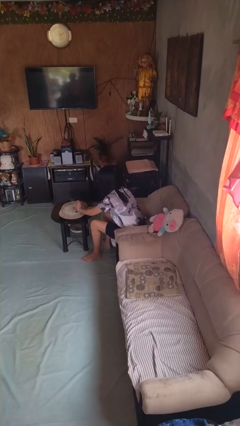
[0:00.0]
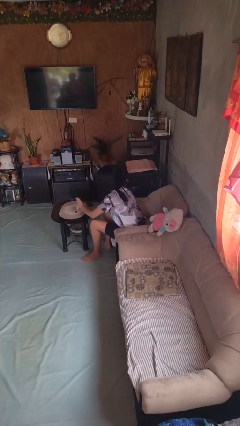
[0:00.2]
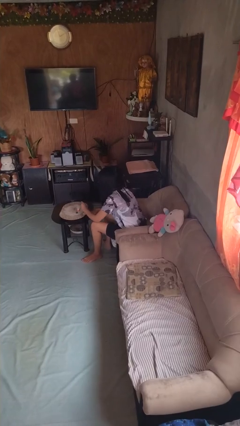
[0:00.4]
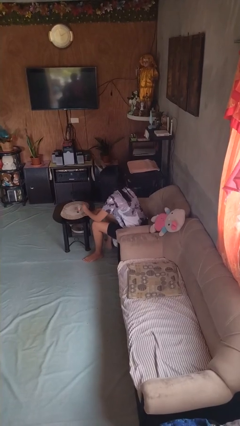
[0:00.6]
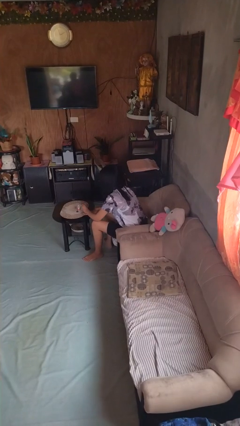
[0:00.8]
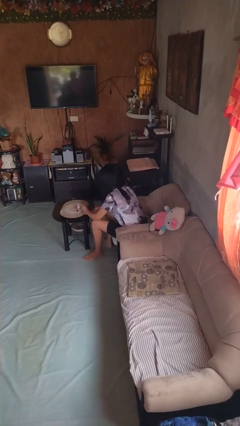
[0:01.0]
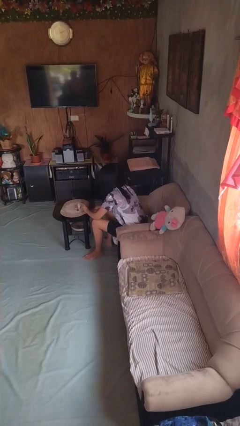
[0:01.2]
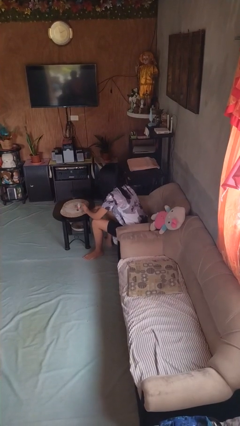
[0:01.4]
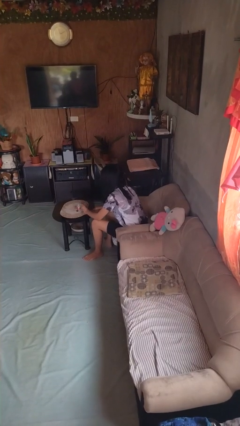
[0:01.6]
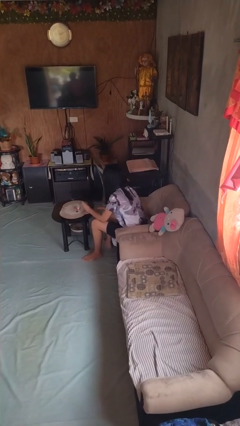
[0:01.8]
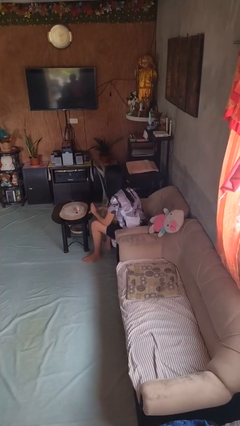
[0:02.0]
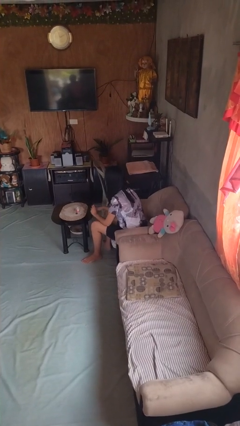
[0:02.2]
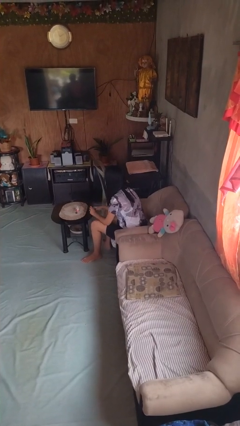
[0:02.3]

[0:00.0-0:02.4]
person paints fingernails

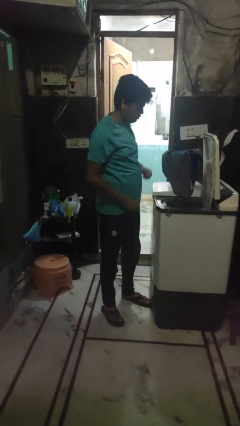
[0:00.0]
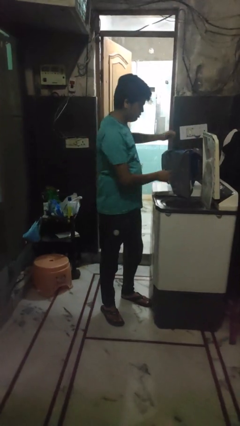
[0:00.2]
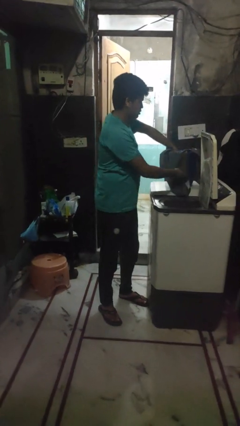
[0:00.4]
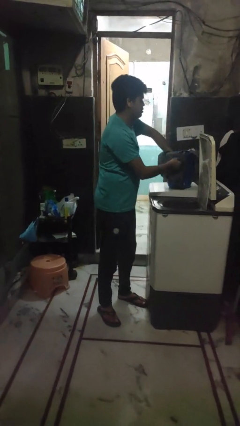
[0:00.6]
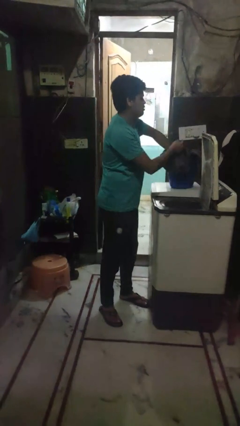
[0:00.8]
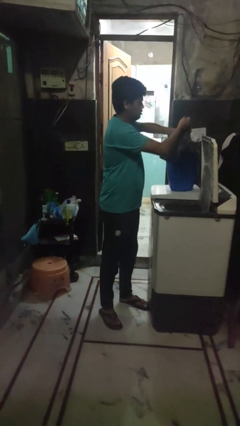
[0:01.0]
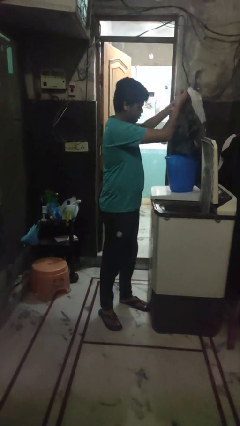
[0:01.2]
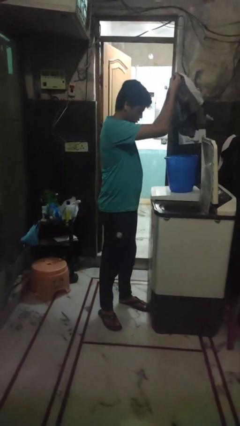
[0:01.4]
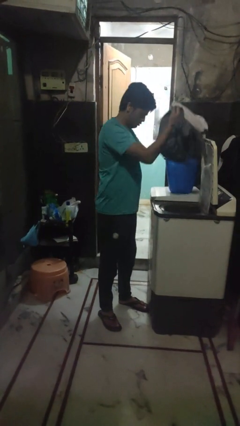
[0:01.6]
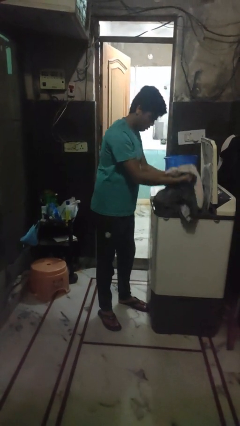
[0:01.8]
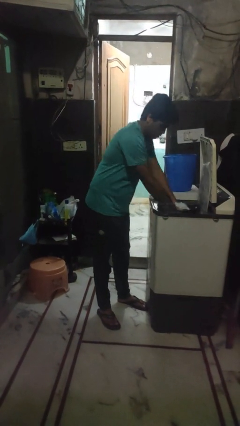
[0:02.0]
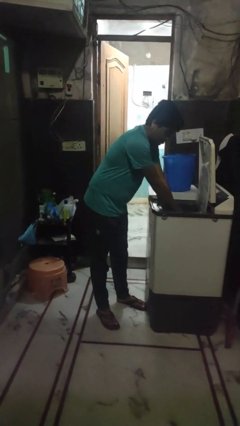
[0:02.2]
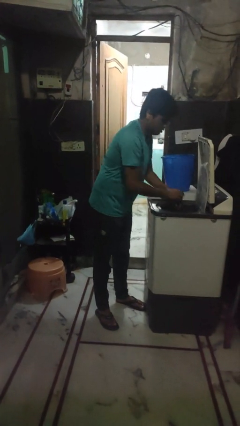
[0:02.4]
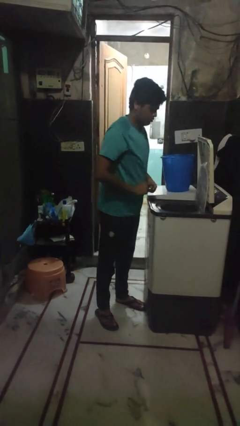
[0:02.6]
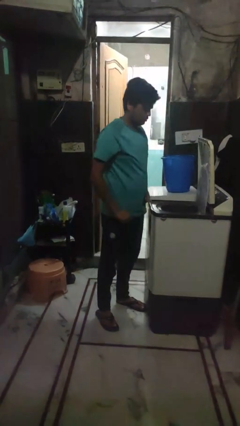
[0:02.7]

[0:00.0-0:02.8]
person loads clotheswasher

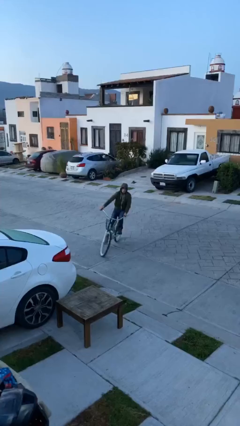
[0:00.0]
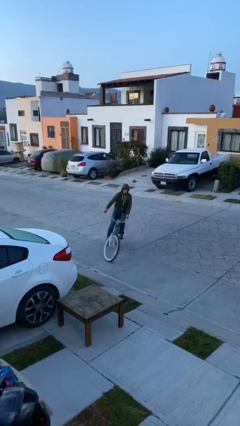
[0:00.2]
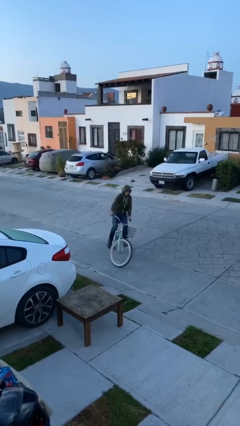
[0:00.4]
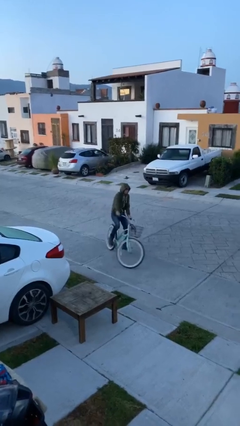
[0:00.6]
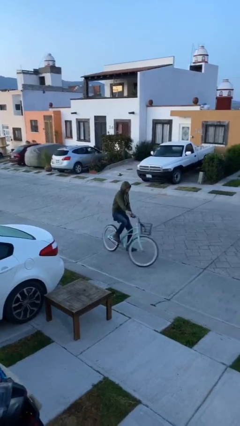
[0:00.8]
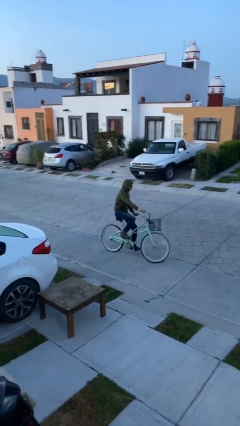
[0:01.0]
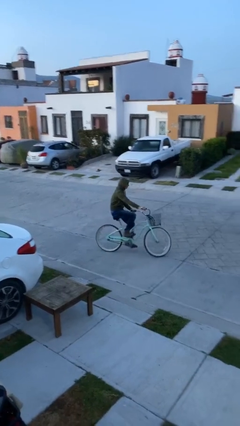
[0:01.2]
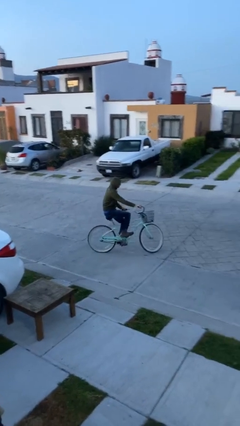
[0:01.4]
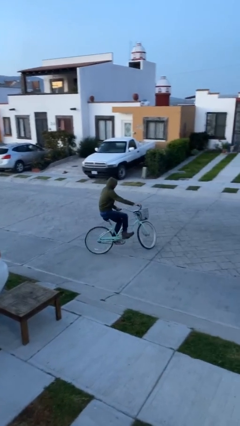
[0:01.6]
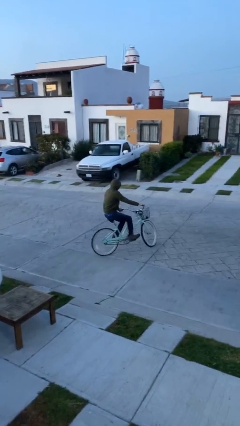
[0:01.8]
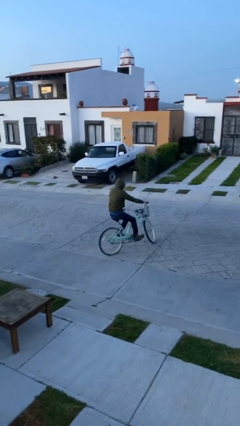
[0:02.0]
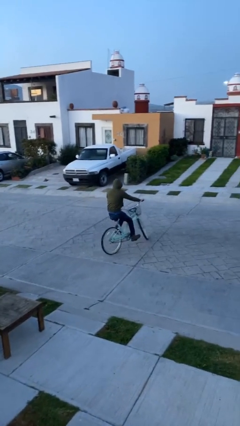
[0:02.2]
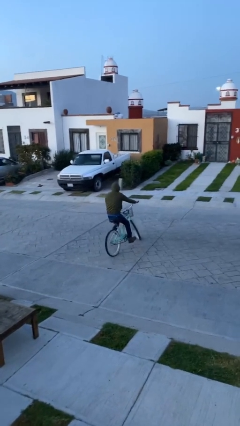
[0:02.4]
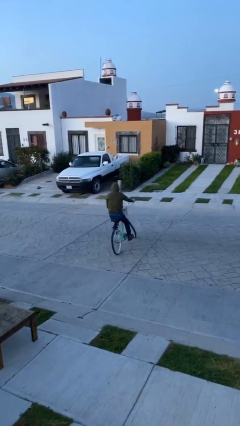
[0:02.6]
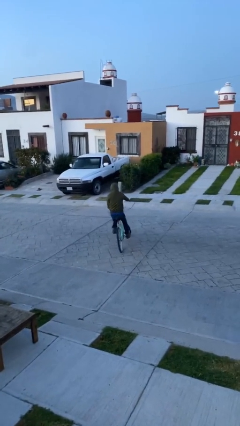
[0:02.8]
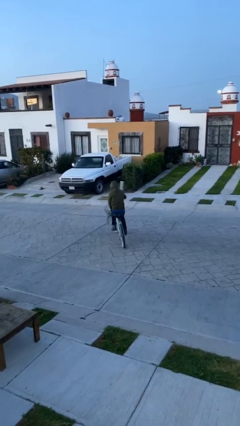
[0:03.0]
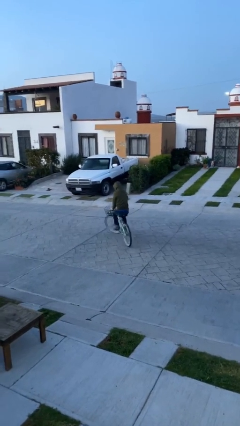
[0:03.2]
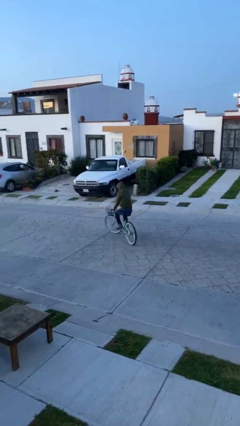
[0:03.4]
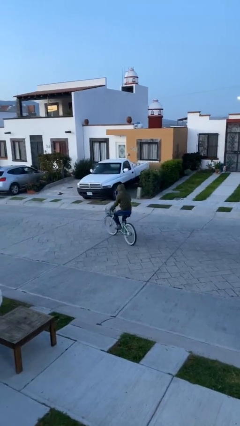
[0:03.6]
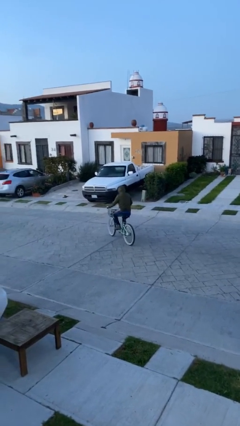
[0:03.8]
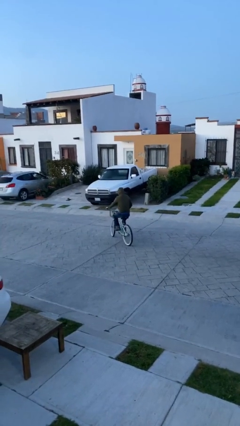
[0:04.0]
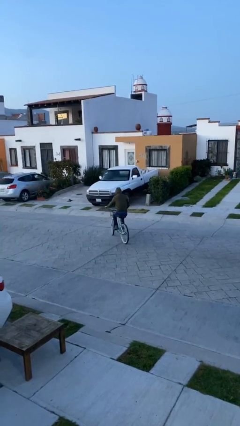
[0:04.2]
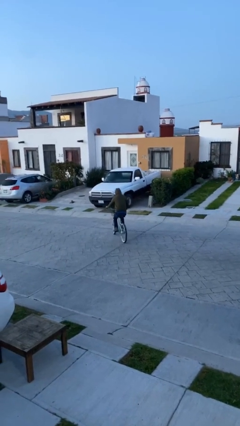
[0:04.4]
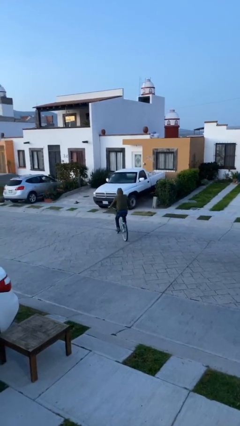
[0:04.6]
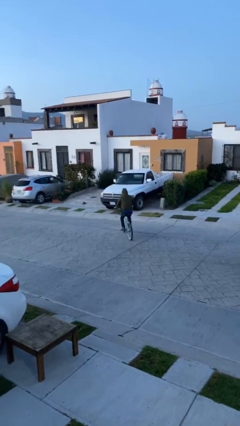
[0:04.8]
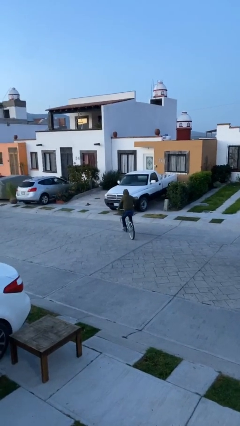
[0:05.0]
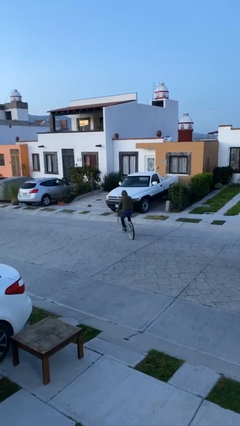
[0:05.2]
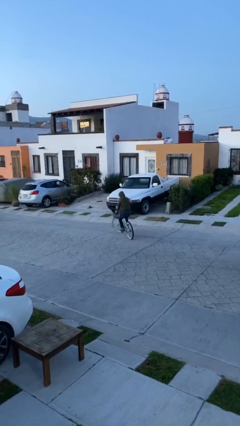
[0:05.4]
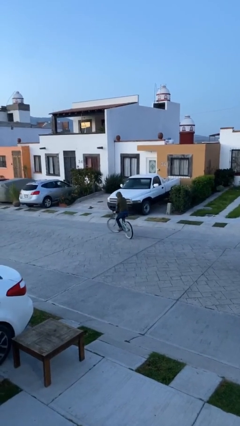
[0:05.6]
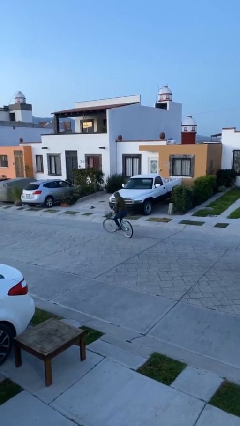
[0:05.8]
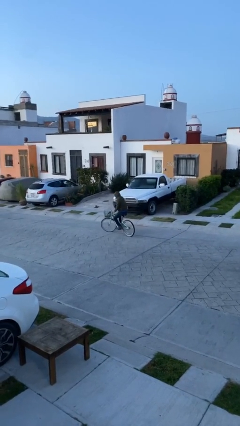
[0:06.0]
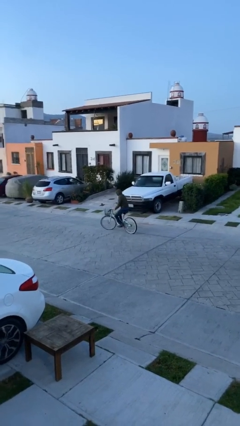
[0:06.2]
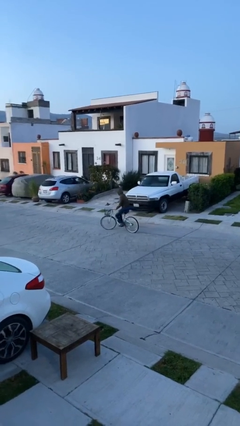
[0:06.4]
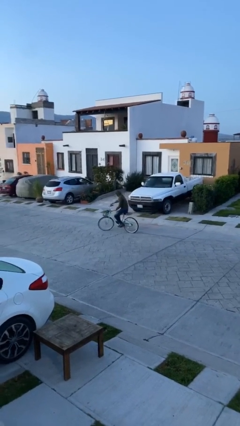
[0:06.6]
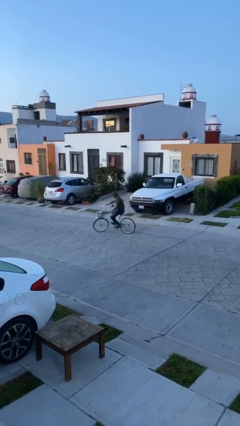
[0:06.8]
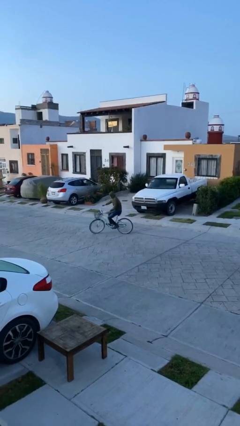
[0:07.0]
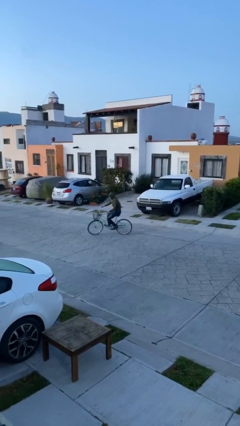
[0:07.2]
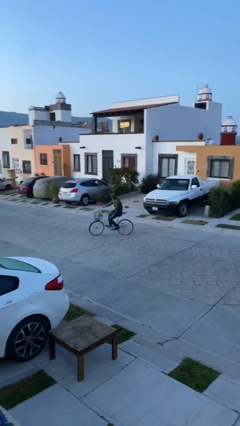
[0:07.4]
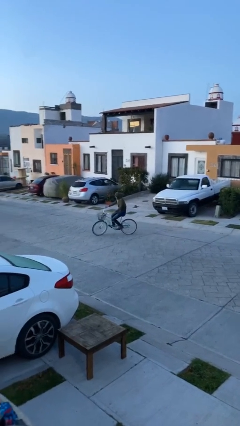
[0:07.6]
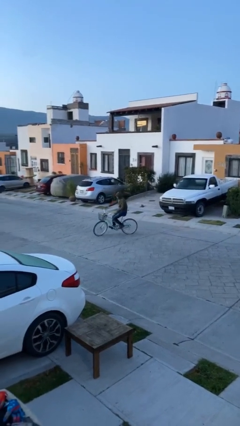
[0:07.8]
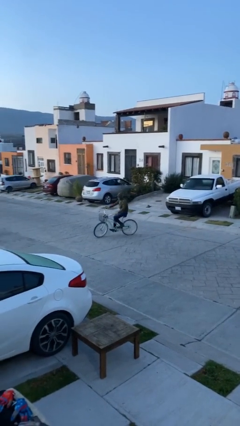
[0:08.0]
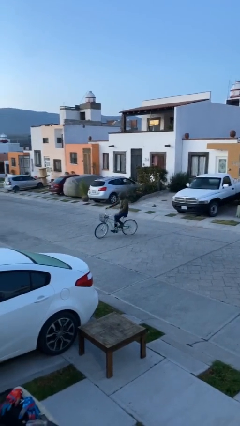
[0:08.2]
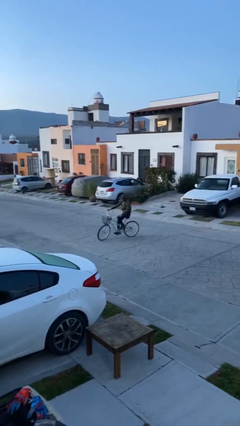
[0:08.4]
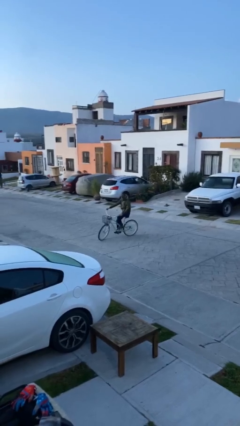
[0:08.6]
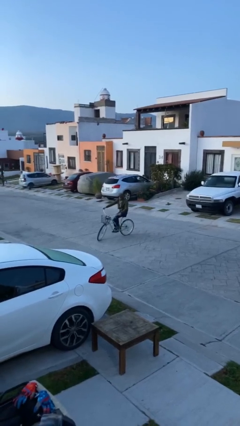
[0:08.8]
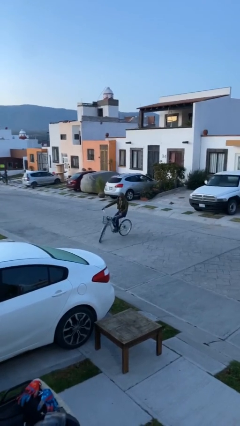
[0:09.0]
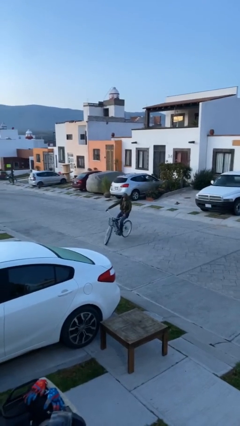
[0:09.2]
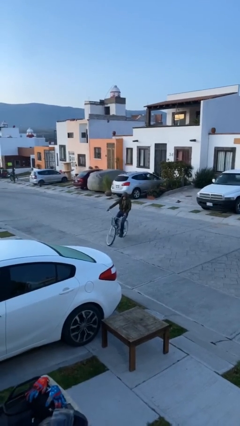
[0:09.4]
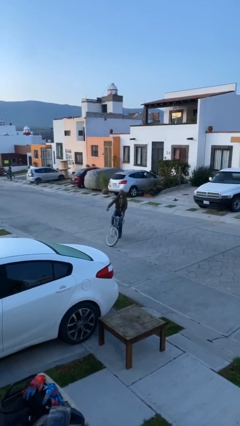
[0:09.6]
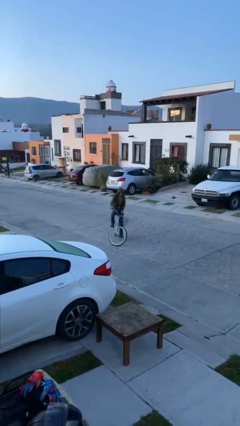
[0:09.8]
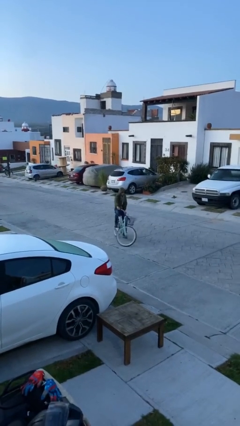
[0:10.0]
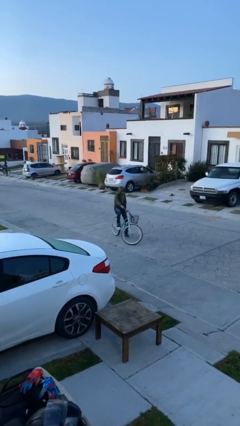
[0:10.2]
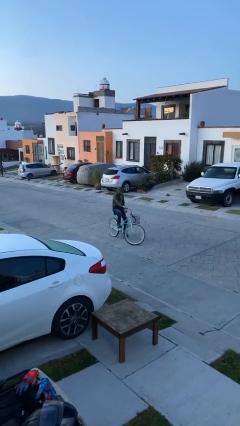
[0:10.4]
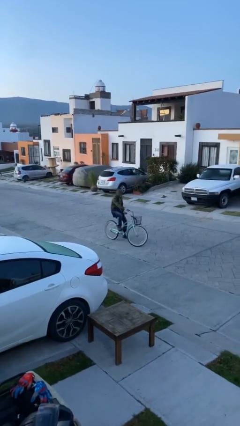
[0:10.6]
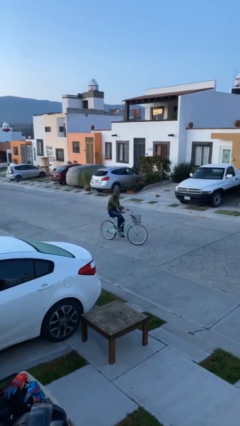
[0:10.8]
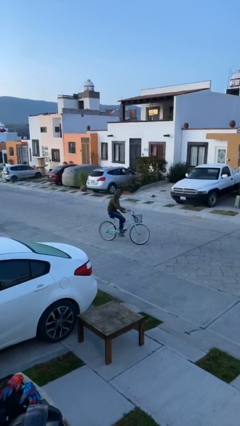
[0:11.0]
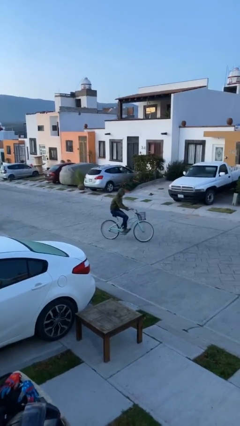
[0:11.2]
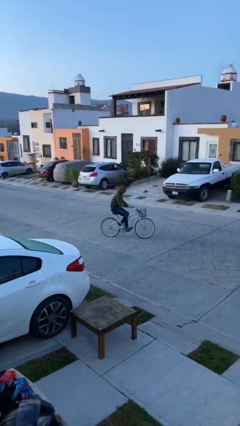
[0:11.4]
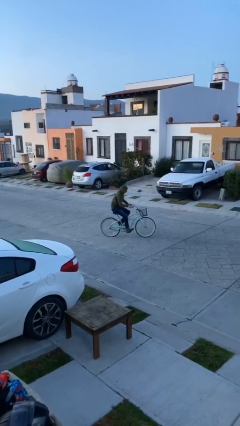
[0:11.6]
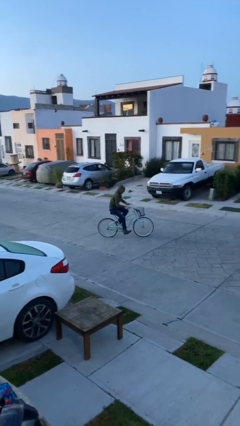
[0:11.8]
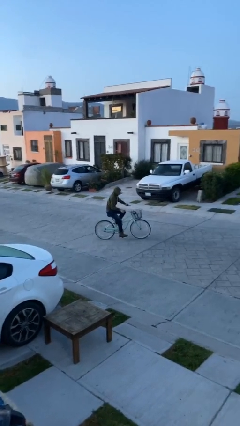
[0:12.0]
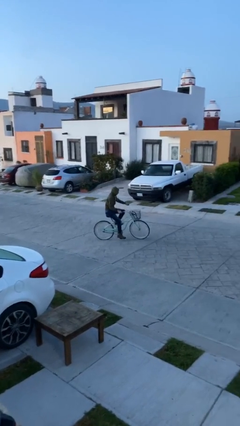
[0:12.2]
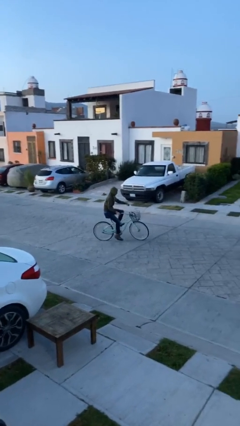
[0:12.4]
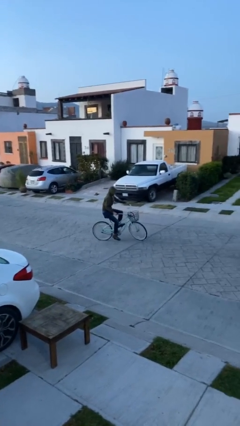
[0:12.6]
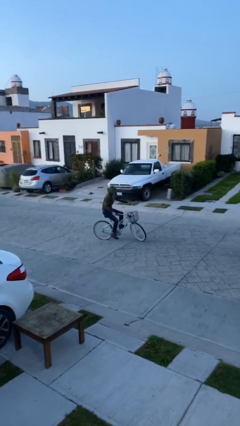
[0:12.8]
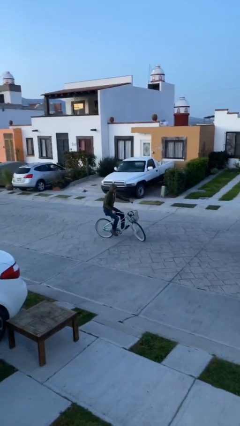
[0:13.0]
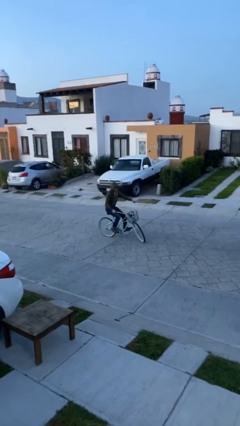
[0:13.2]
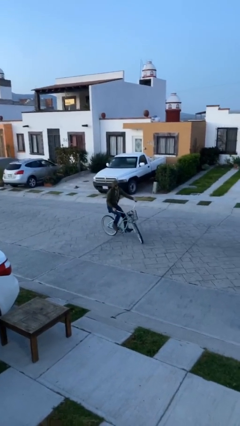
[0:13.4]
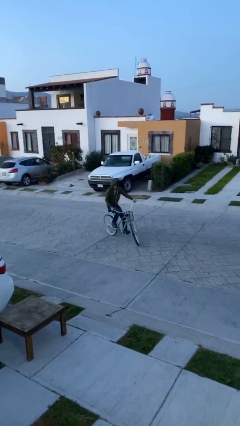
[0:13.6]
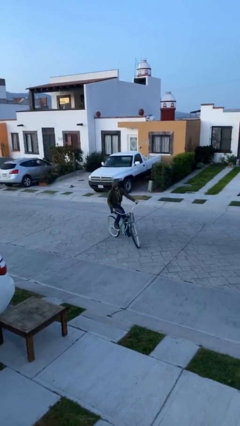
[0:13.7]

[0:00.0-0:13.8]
person rides bicycle
